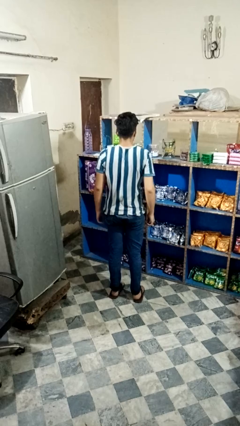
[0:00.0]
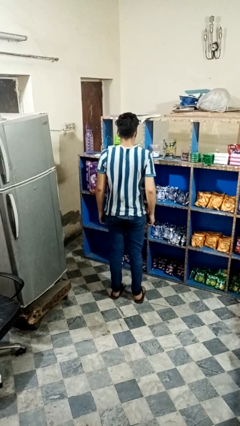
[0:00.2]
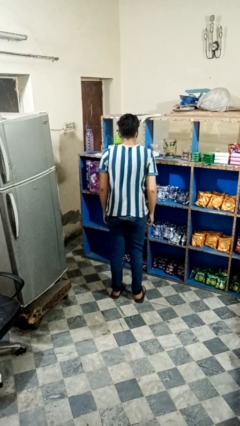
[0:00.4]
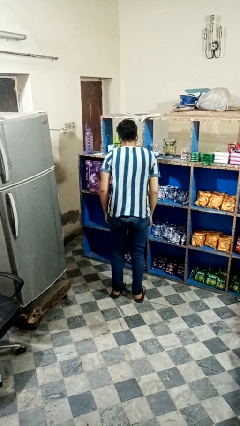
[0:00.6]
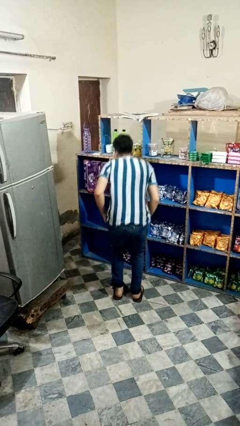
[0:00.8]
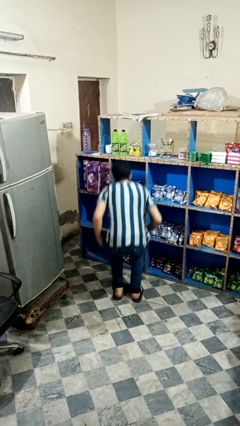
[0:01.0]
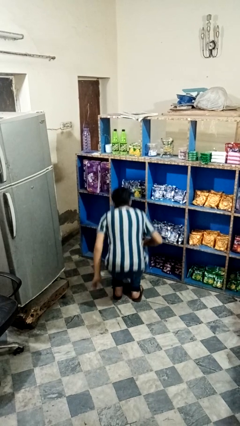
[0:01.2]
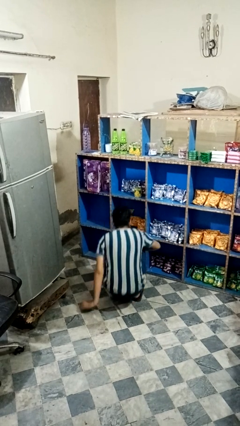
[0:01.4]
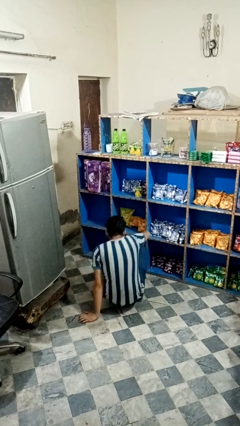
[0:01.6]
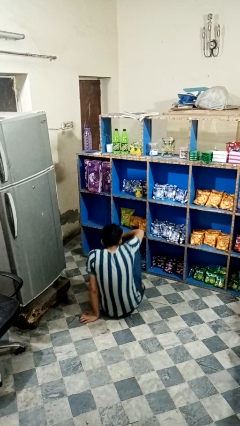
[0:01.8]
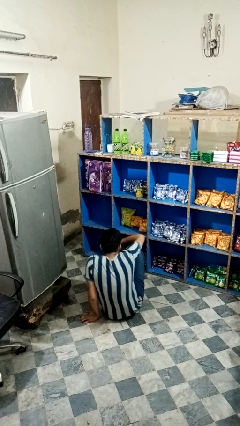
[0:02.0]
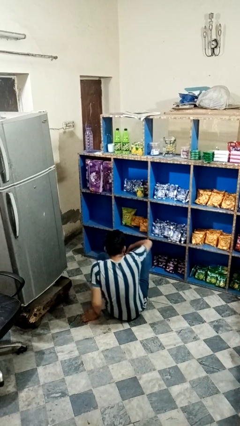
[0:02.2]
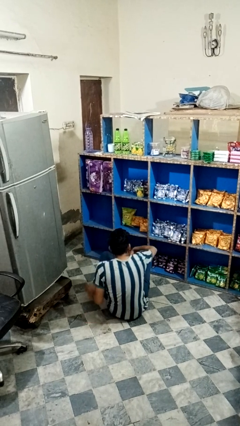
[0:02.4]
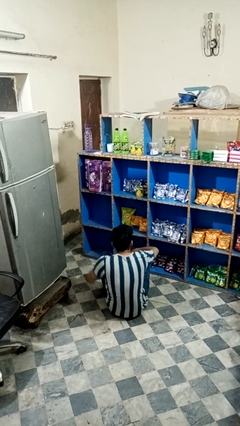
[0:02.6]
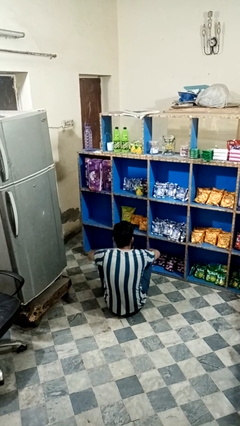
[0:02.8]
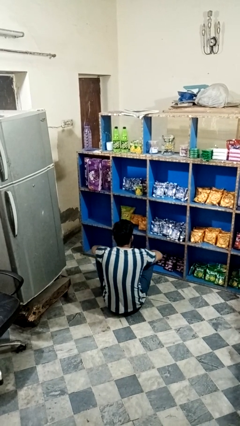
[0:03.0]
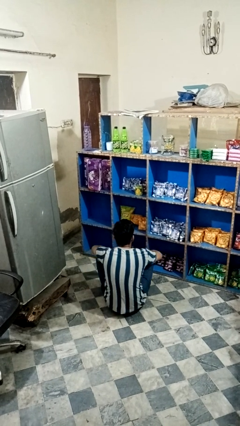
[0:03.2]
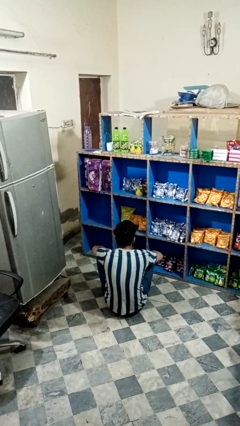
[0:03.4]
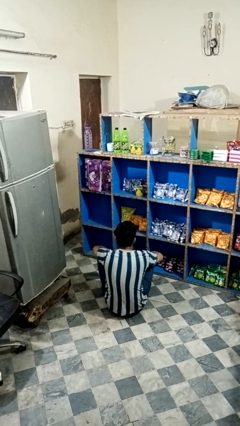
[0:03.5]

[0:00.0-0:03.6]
person sits crisscross

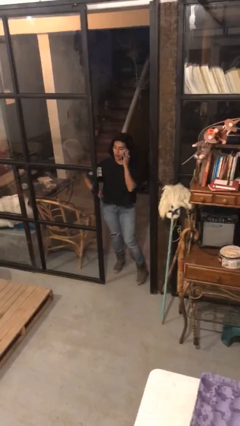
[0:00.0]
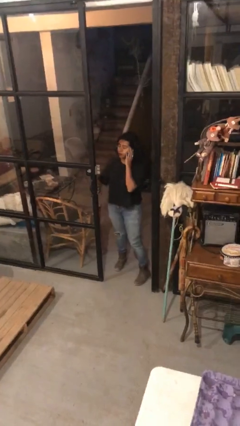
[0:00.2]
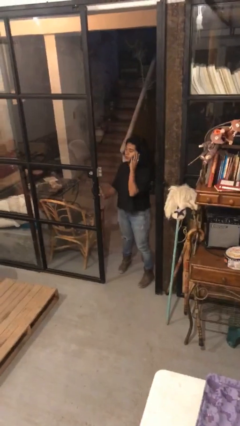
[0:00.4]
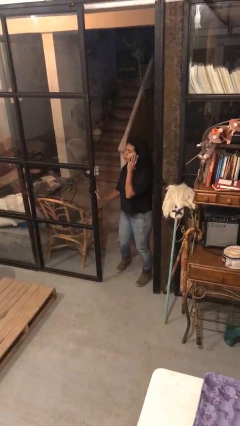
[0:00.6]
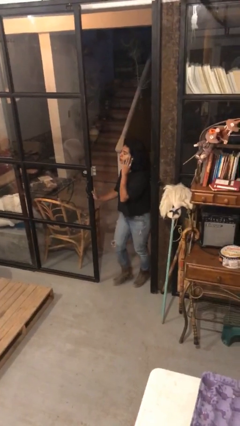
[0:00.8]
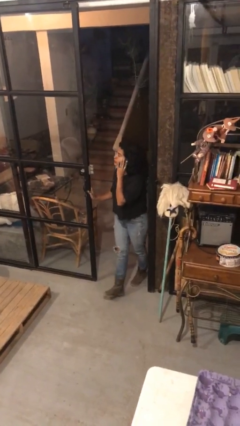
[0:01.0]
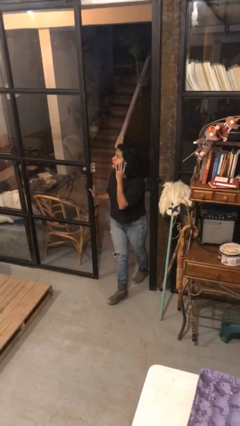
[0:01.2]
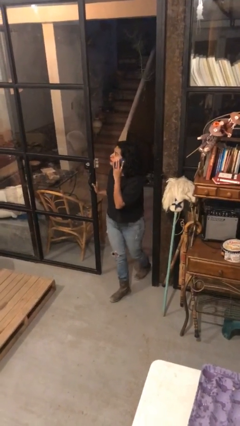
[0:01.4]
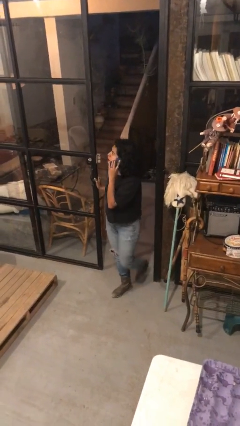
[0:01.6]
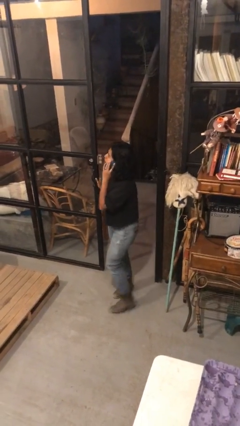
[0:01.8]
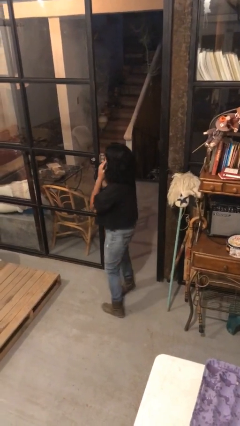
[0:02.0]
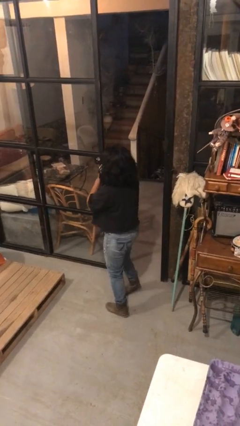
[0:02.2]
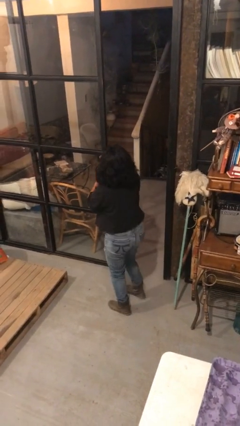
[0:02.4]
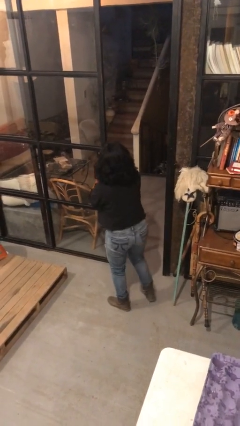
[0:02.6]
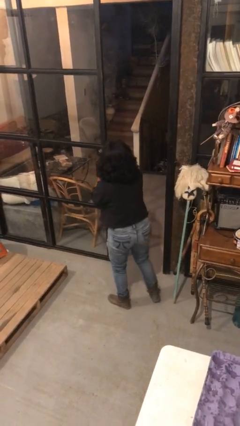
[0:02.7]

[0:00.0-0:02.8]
person enters scene through structure

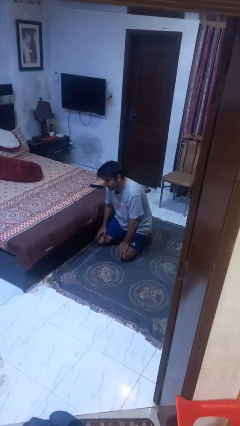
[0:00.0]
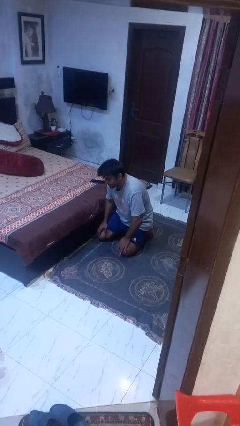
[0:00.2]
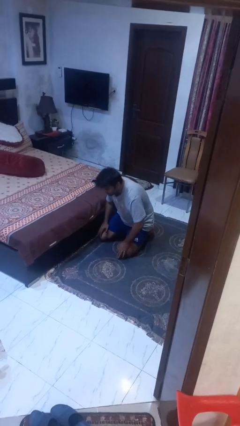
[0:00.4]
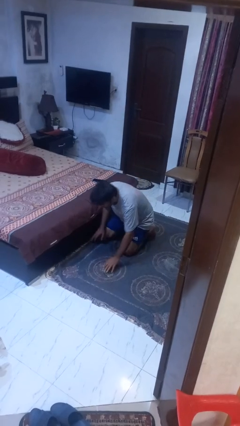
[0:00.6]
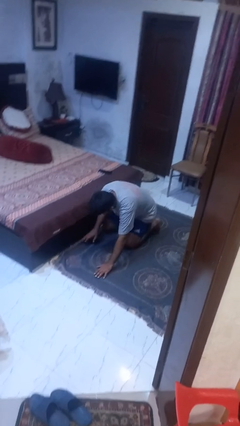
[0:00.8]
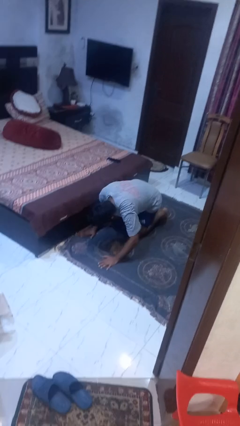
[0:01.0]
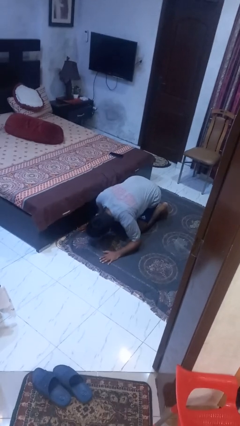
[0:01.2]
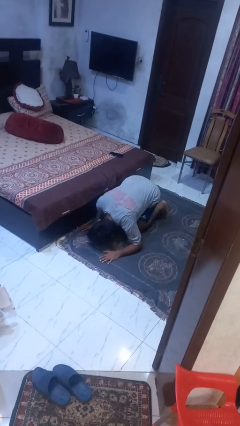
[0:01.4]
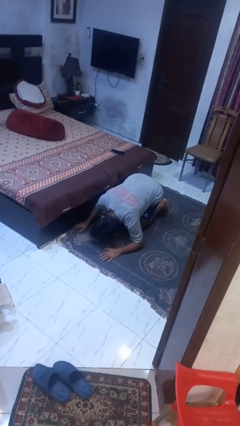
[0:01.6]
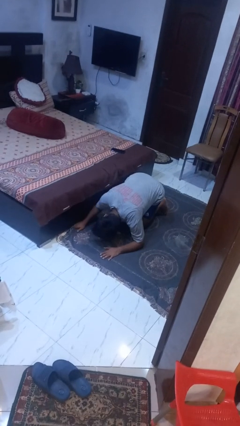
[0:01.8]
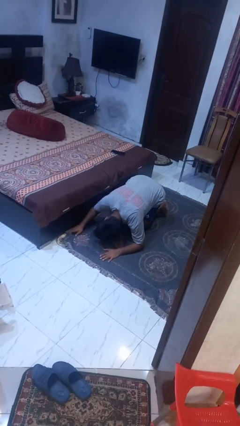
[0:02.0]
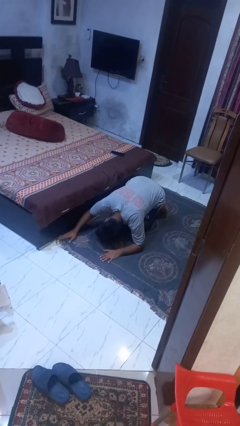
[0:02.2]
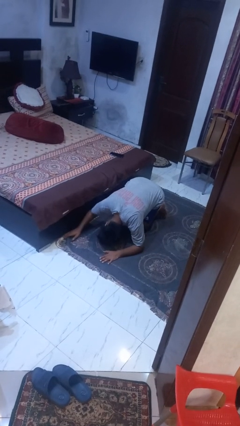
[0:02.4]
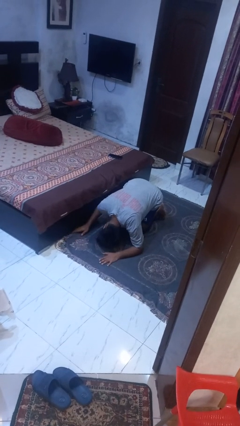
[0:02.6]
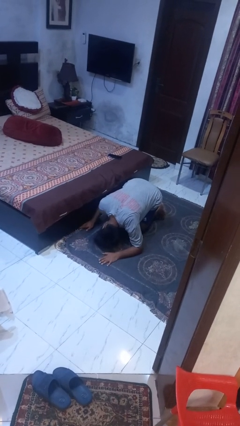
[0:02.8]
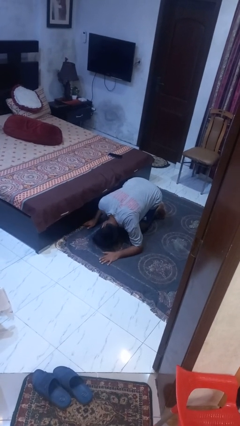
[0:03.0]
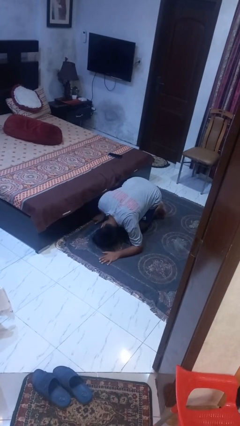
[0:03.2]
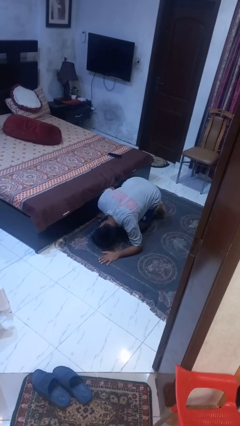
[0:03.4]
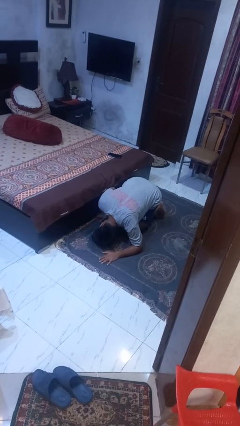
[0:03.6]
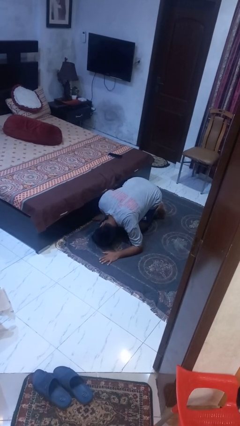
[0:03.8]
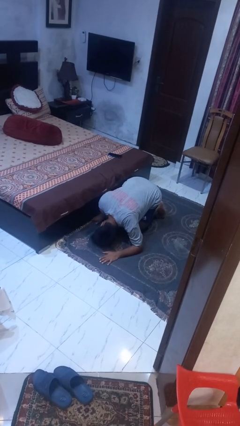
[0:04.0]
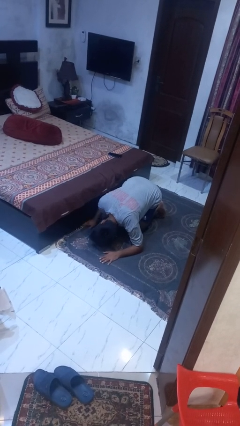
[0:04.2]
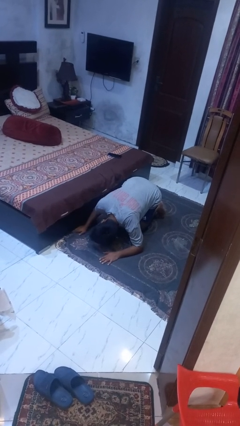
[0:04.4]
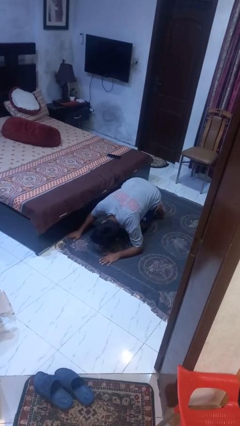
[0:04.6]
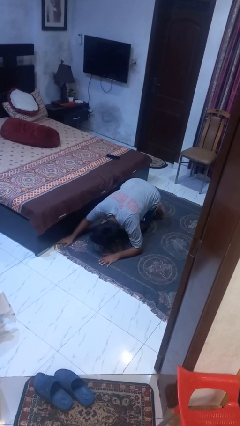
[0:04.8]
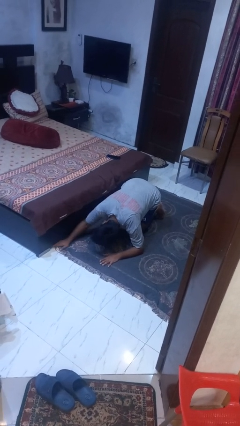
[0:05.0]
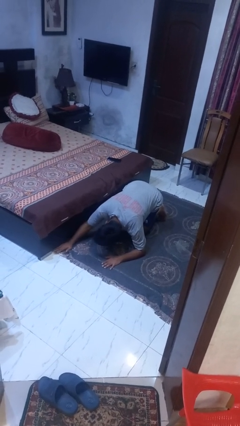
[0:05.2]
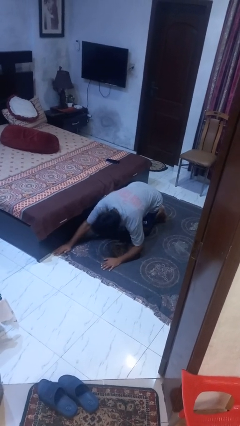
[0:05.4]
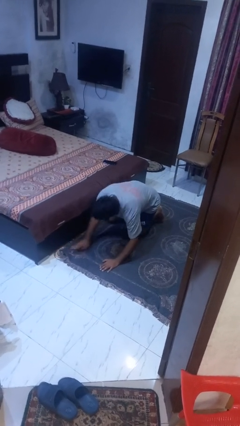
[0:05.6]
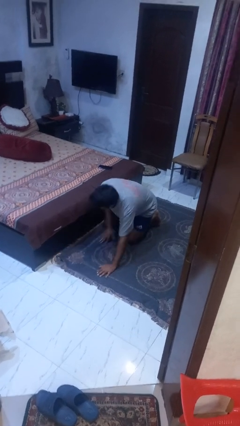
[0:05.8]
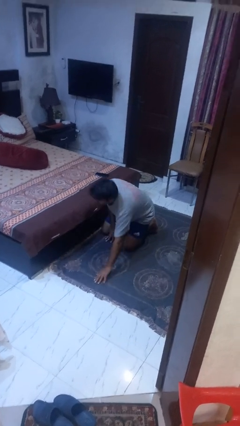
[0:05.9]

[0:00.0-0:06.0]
person searches under bed

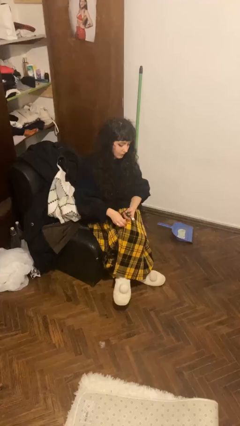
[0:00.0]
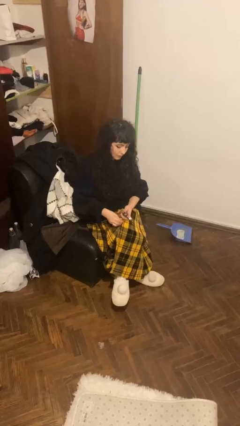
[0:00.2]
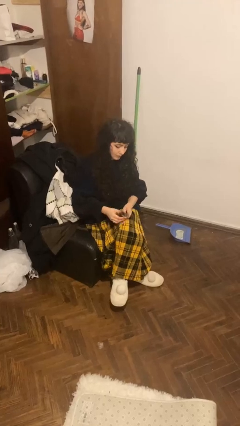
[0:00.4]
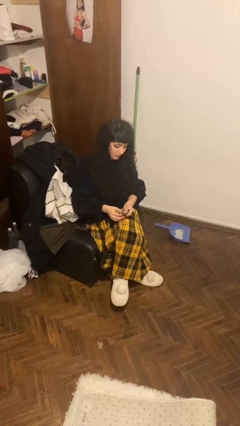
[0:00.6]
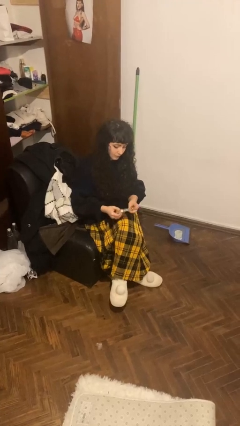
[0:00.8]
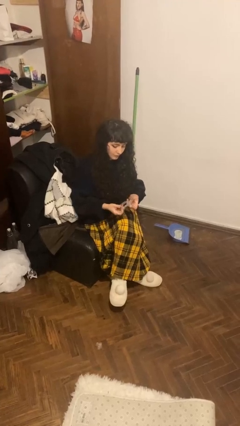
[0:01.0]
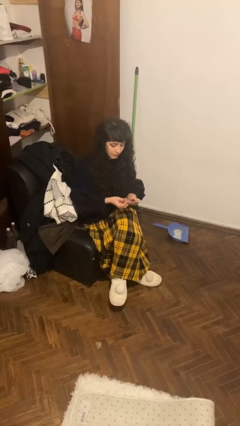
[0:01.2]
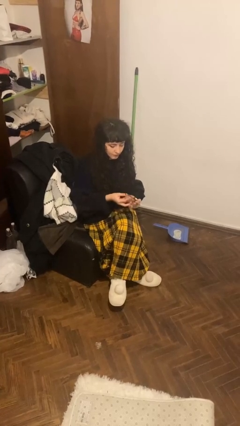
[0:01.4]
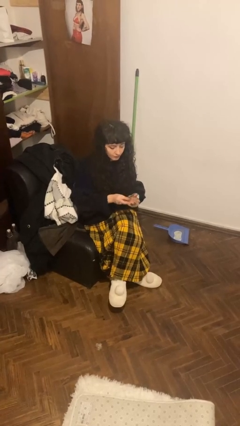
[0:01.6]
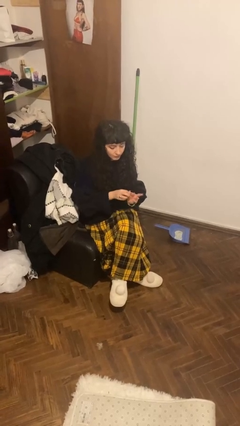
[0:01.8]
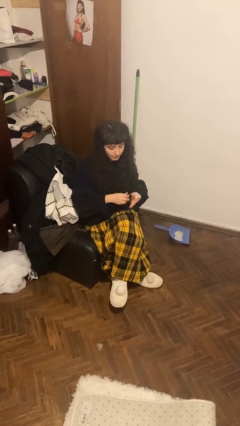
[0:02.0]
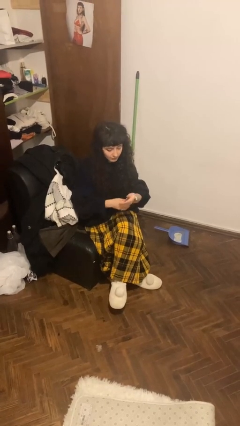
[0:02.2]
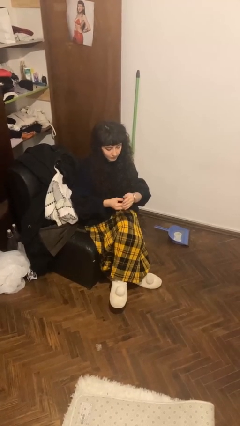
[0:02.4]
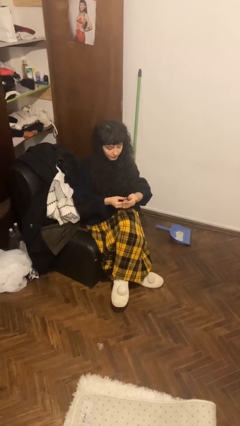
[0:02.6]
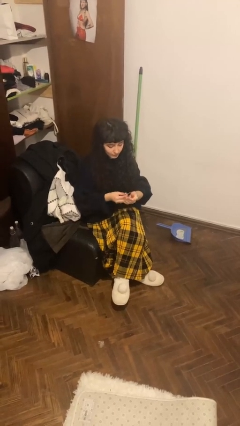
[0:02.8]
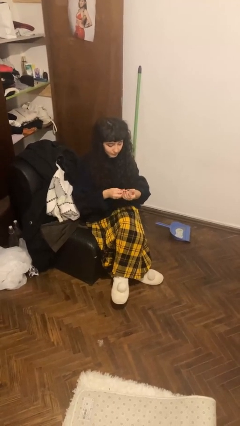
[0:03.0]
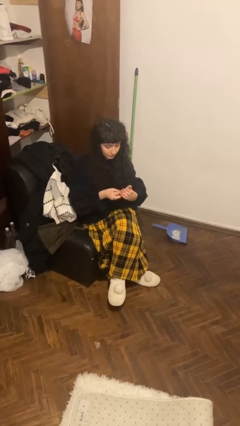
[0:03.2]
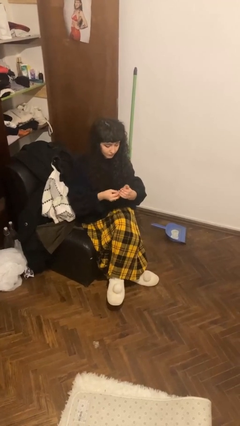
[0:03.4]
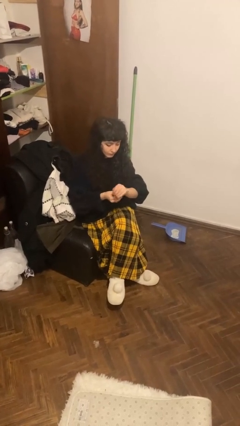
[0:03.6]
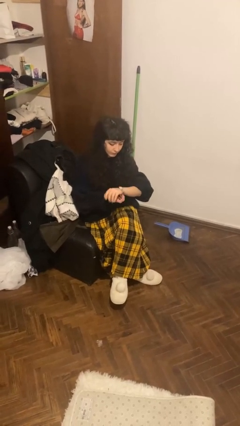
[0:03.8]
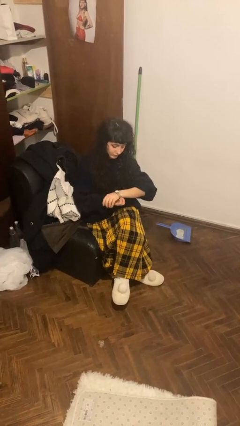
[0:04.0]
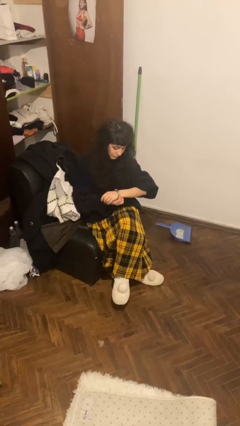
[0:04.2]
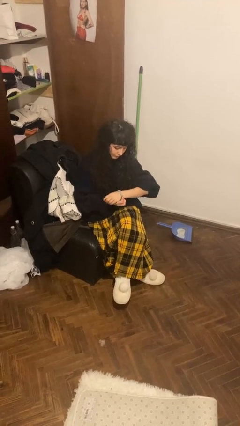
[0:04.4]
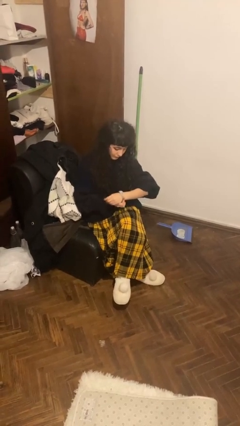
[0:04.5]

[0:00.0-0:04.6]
person puts on wristwatch

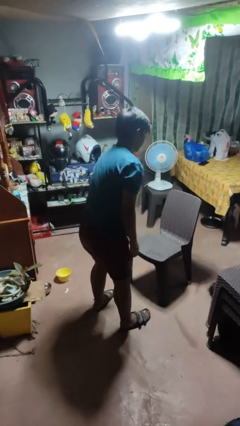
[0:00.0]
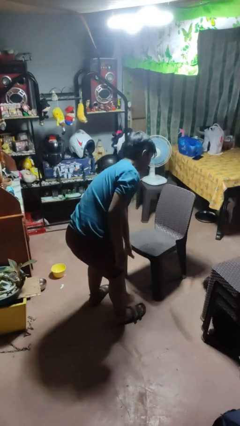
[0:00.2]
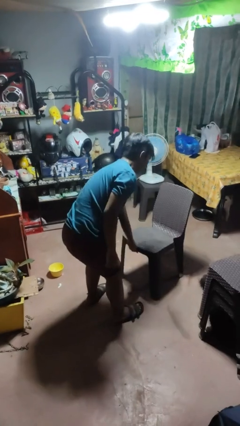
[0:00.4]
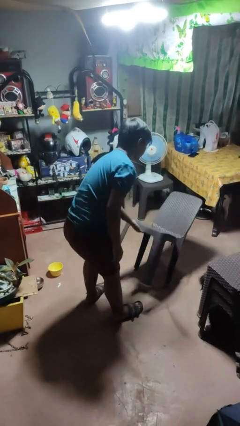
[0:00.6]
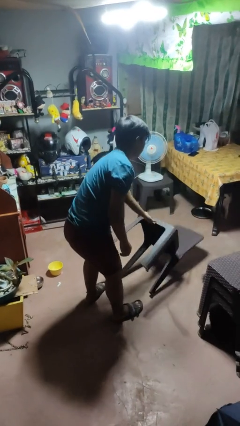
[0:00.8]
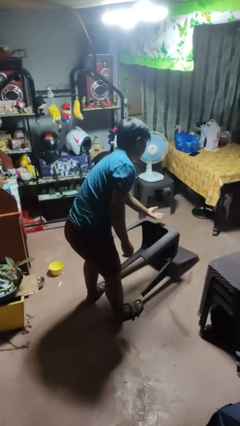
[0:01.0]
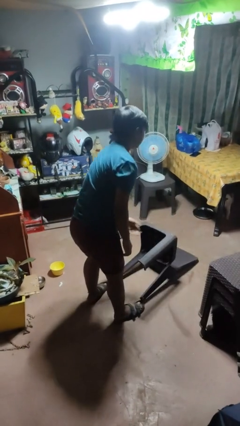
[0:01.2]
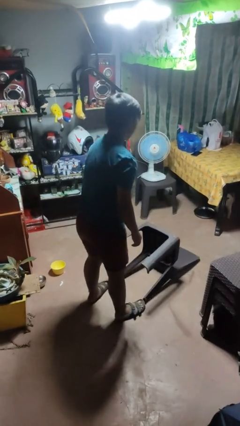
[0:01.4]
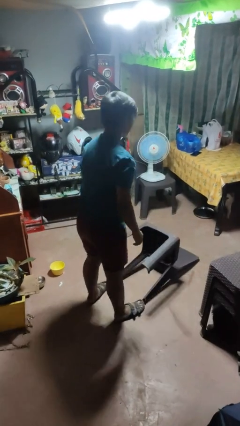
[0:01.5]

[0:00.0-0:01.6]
person knocks over furniture
